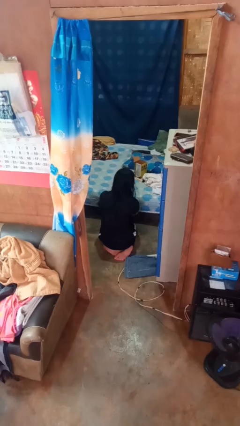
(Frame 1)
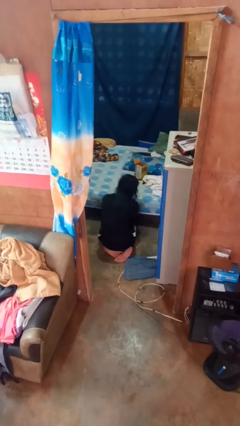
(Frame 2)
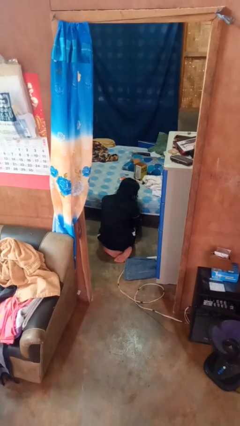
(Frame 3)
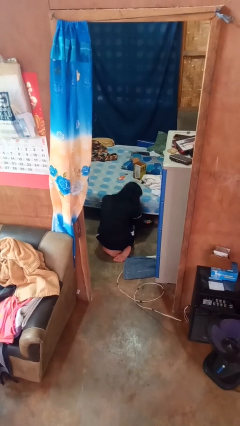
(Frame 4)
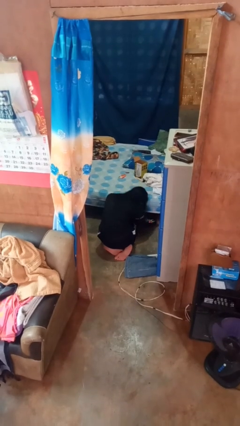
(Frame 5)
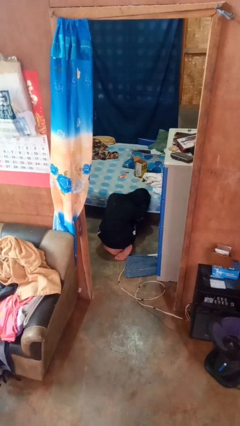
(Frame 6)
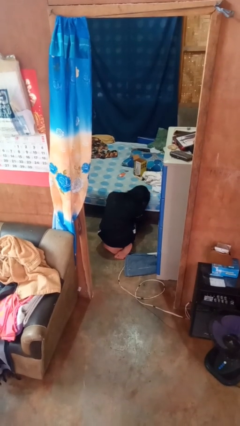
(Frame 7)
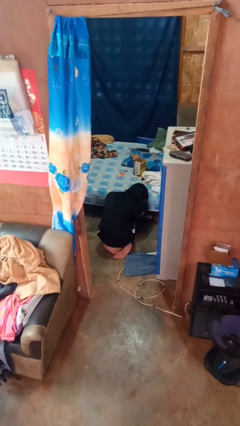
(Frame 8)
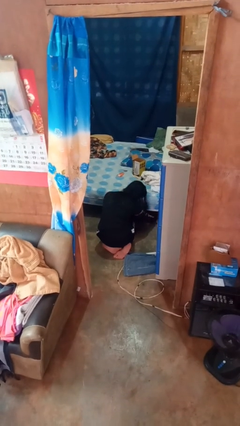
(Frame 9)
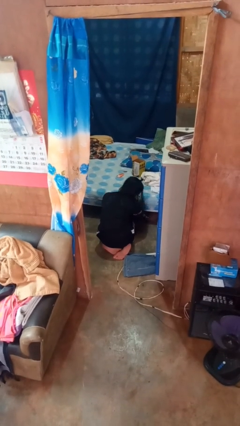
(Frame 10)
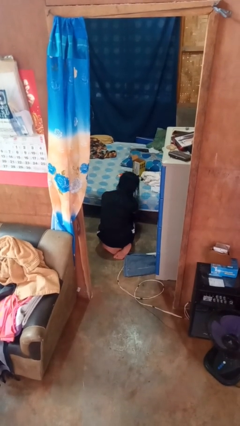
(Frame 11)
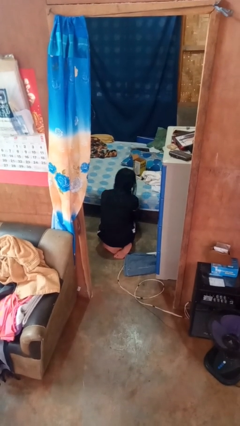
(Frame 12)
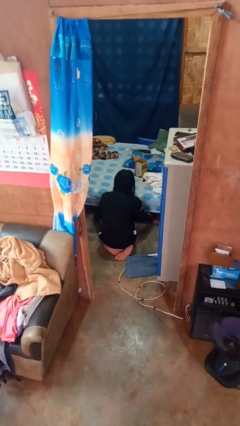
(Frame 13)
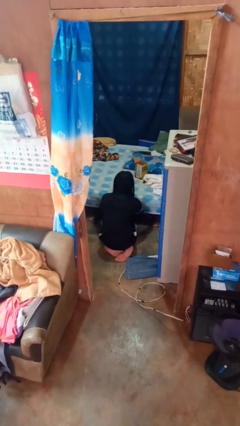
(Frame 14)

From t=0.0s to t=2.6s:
person searches under bed

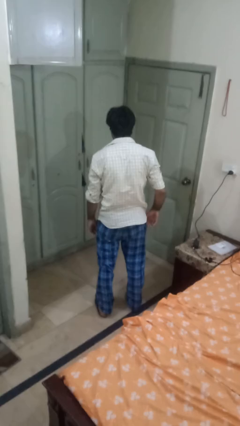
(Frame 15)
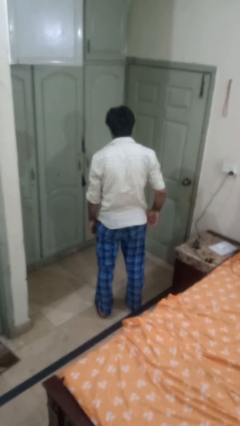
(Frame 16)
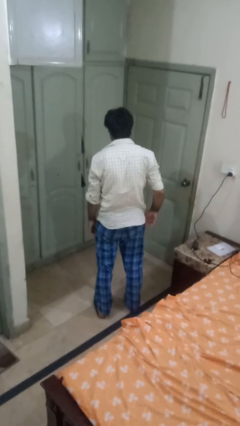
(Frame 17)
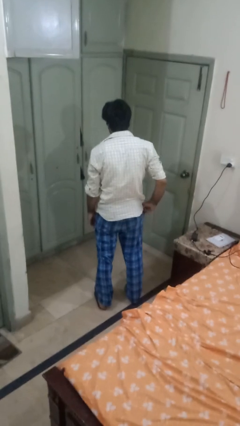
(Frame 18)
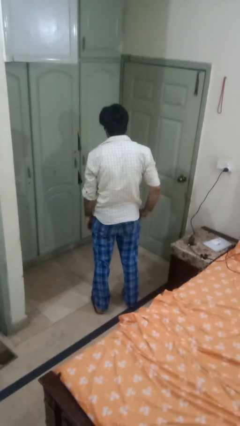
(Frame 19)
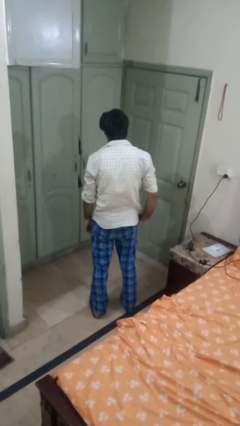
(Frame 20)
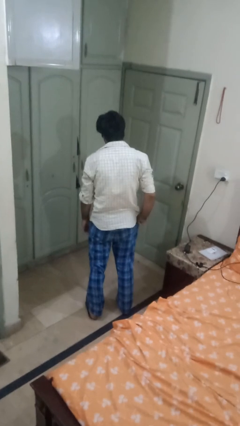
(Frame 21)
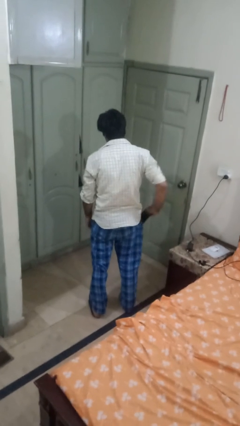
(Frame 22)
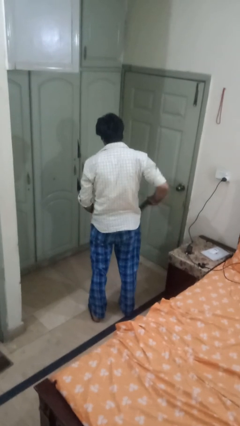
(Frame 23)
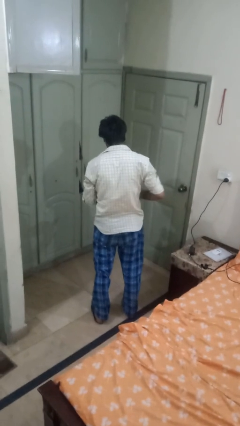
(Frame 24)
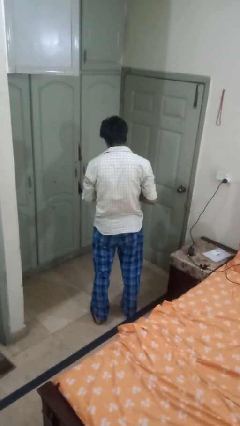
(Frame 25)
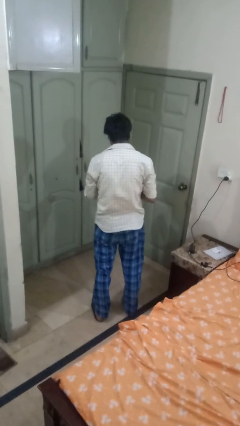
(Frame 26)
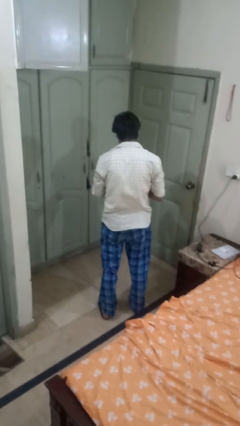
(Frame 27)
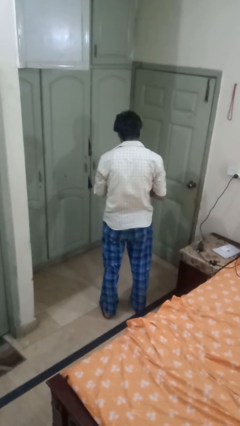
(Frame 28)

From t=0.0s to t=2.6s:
person takes phone from pocket

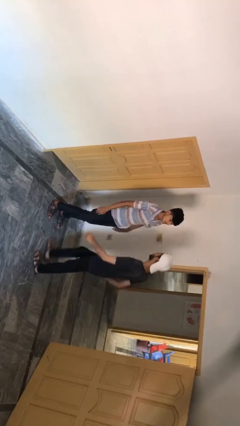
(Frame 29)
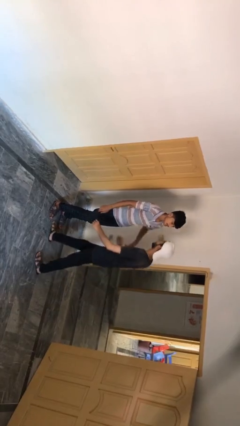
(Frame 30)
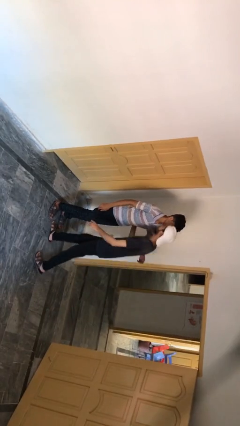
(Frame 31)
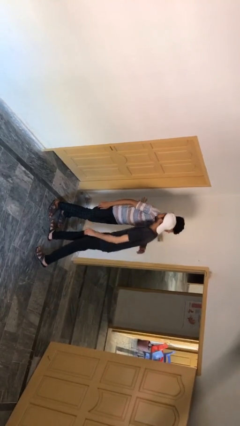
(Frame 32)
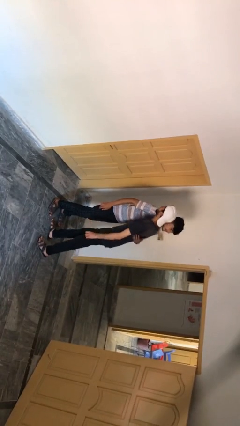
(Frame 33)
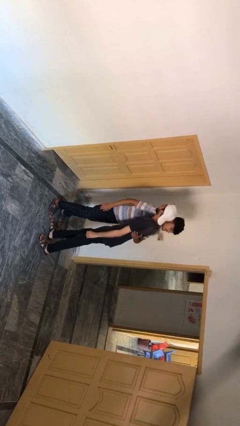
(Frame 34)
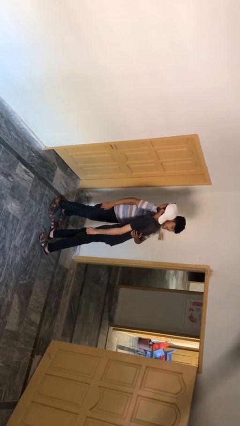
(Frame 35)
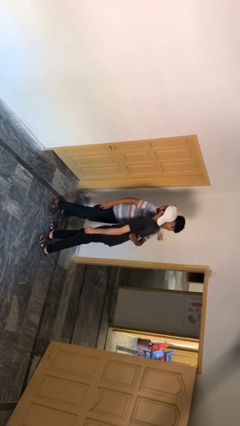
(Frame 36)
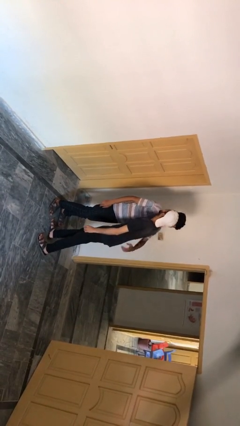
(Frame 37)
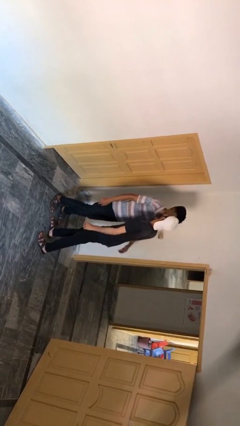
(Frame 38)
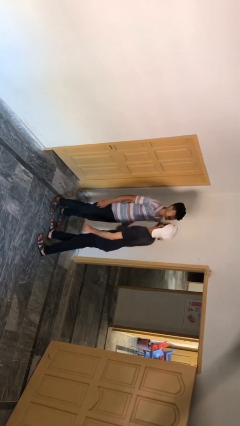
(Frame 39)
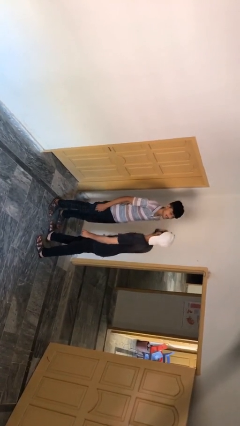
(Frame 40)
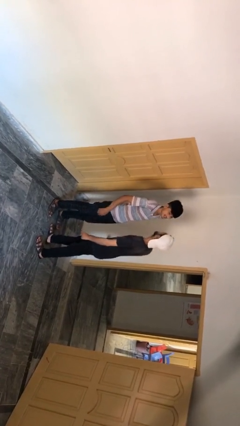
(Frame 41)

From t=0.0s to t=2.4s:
person embraces person

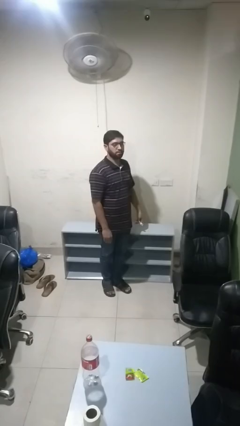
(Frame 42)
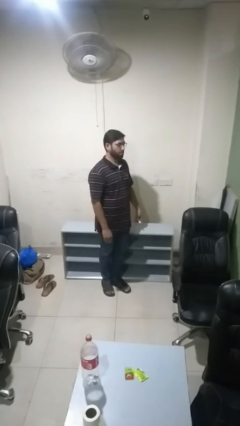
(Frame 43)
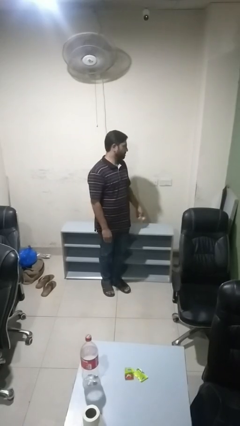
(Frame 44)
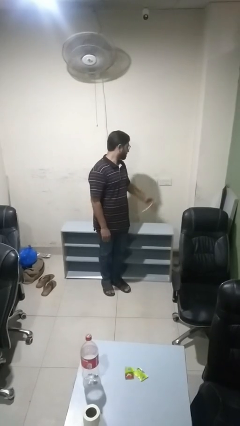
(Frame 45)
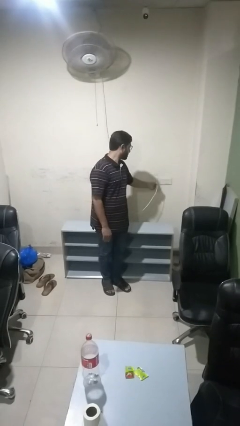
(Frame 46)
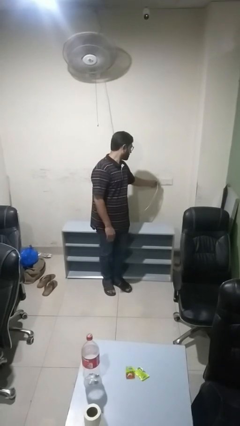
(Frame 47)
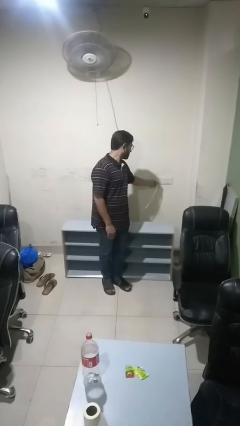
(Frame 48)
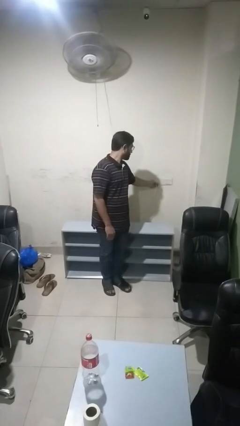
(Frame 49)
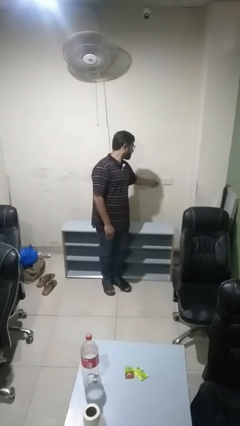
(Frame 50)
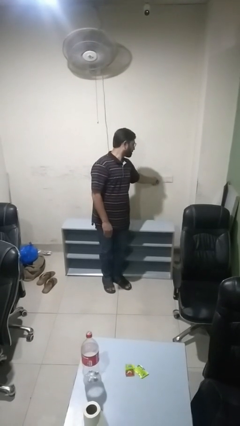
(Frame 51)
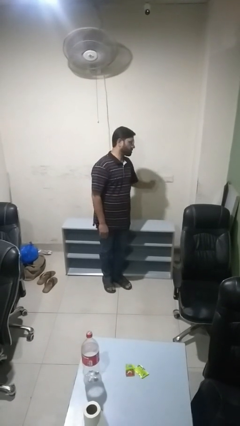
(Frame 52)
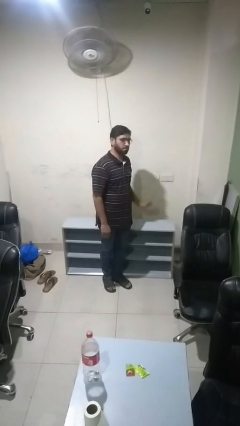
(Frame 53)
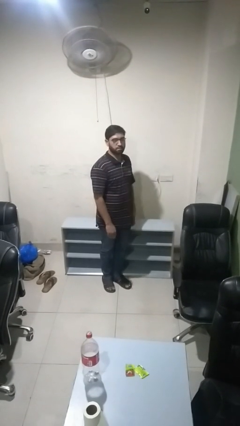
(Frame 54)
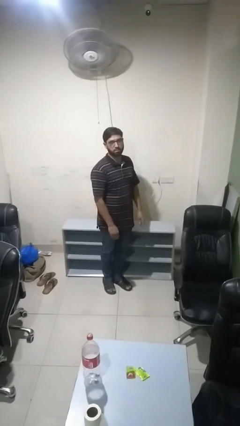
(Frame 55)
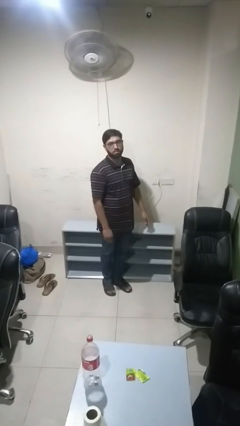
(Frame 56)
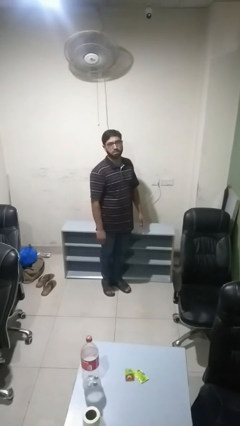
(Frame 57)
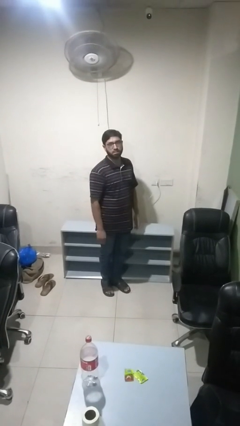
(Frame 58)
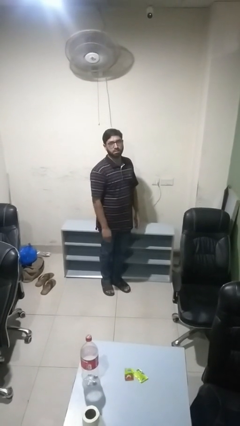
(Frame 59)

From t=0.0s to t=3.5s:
person plugs into electrical socket

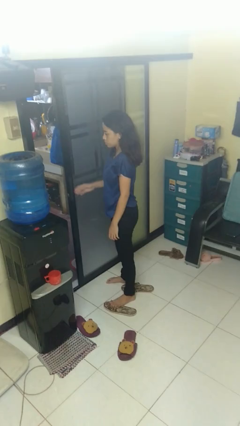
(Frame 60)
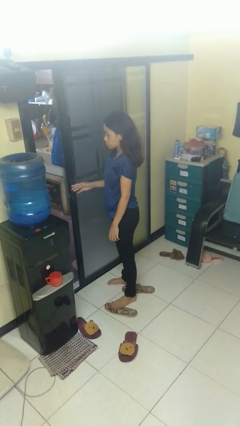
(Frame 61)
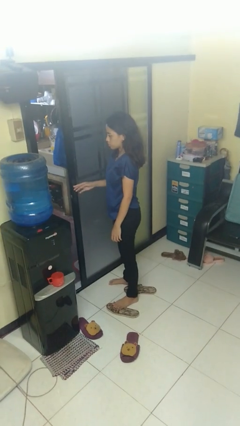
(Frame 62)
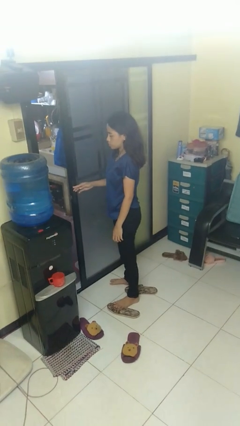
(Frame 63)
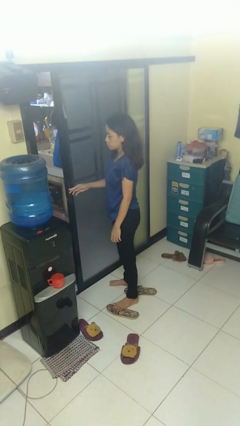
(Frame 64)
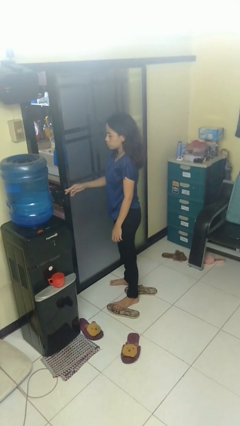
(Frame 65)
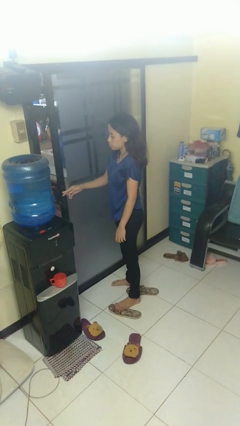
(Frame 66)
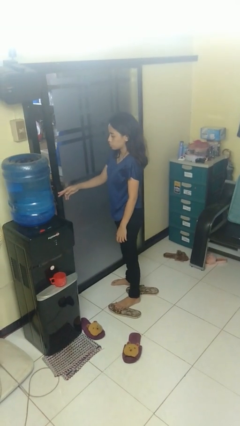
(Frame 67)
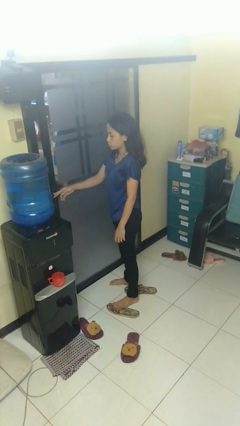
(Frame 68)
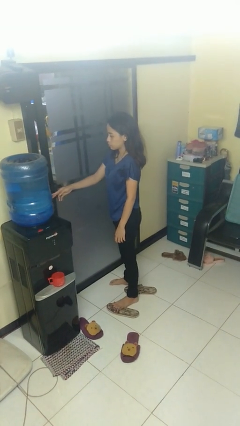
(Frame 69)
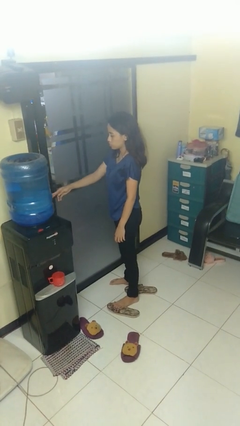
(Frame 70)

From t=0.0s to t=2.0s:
person closes sliding door

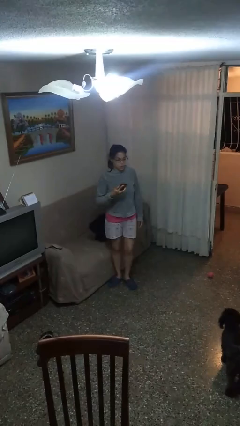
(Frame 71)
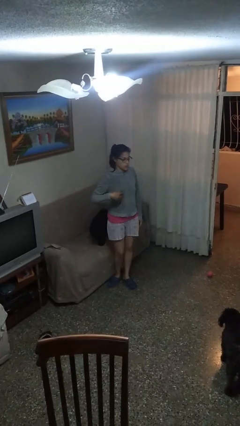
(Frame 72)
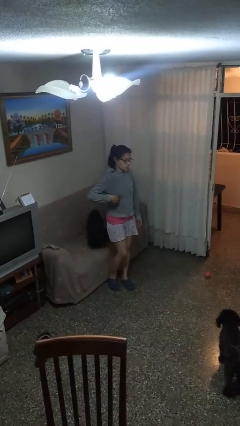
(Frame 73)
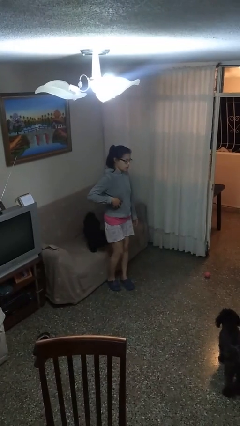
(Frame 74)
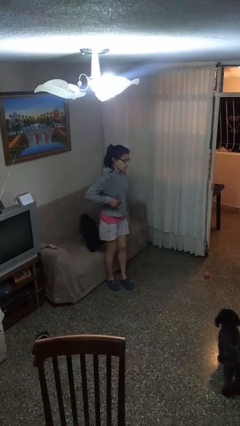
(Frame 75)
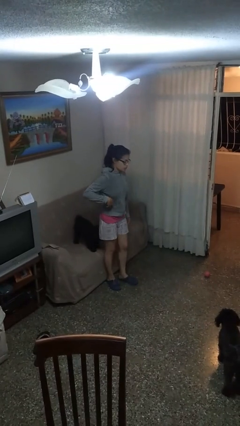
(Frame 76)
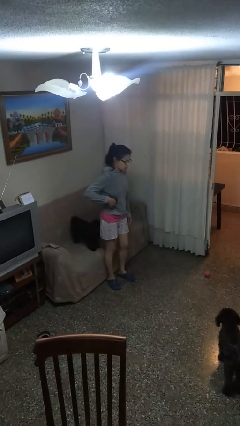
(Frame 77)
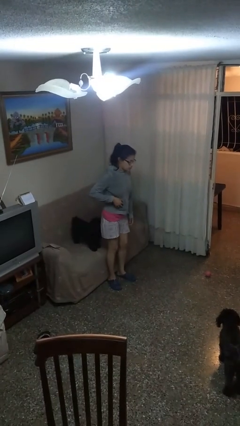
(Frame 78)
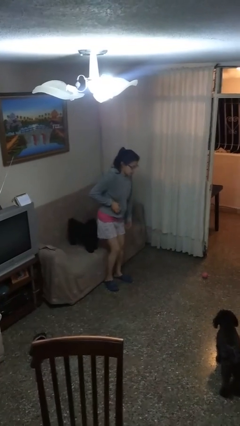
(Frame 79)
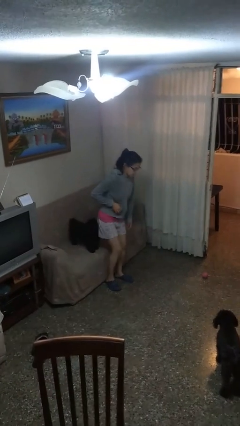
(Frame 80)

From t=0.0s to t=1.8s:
person puts phone into pocket

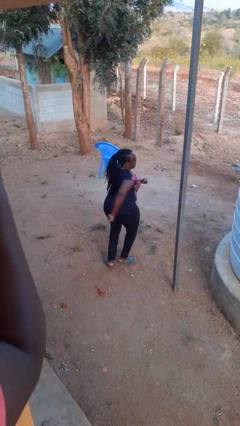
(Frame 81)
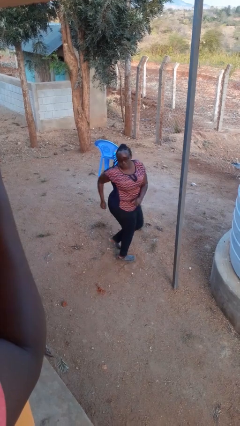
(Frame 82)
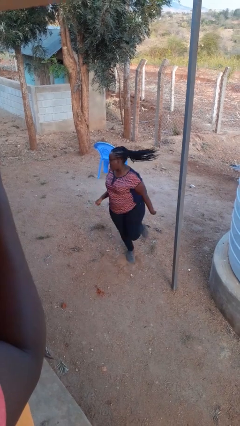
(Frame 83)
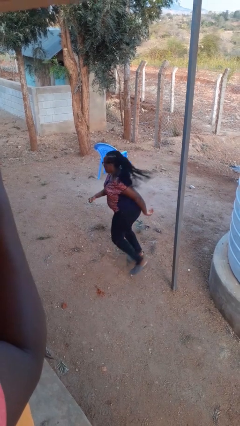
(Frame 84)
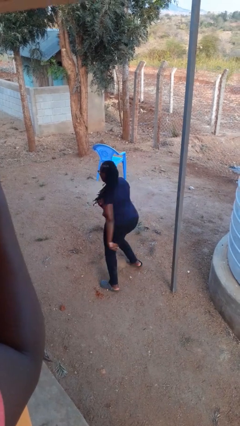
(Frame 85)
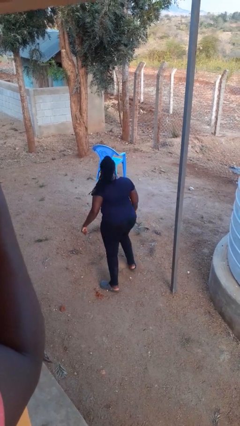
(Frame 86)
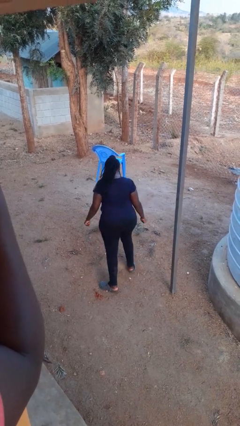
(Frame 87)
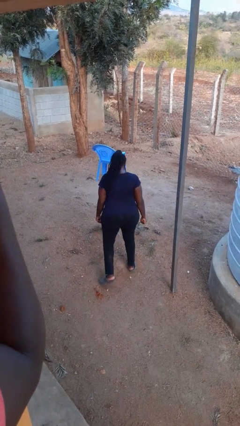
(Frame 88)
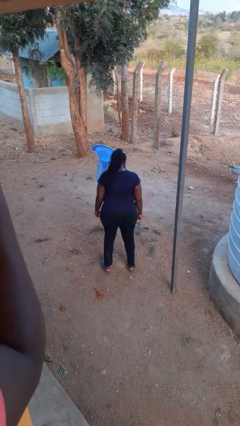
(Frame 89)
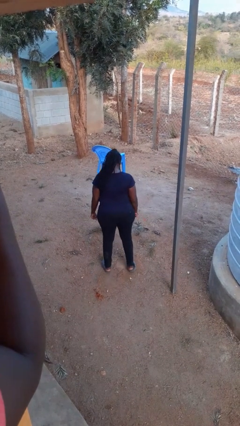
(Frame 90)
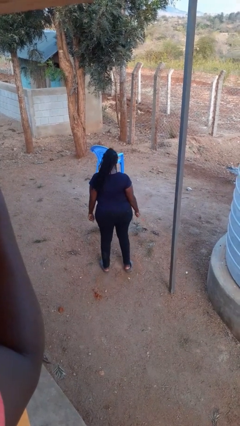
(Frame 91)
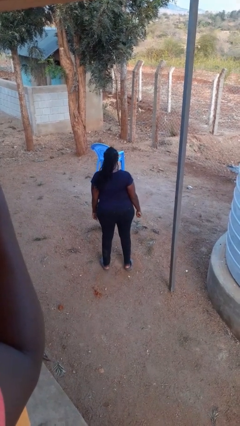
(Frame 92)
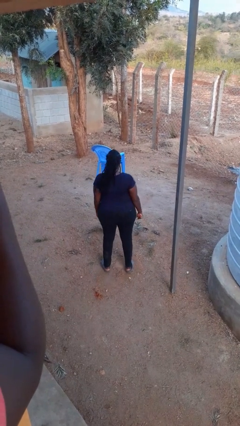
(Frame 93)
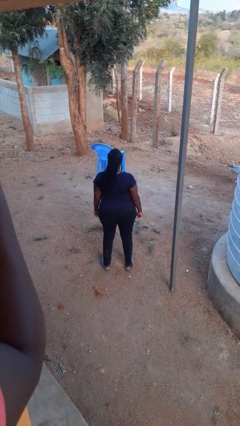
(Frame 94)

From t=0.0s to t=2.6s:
person twirls
